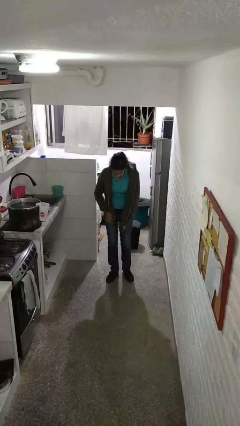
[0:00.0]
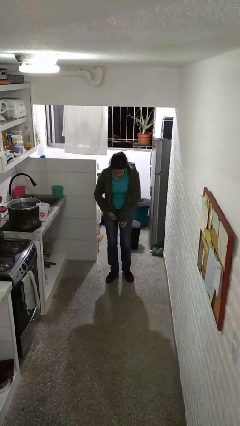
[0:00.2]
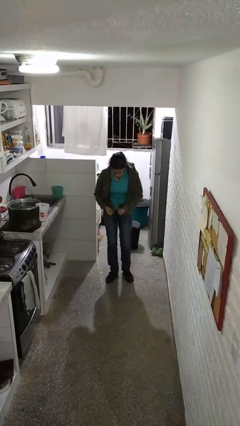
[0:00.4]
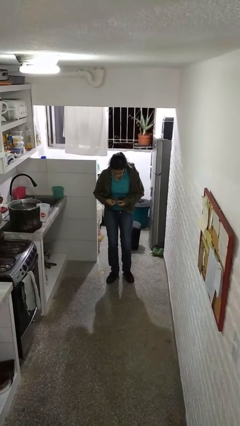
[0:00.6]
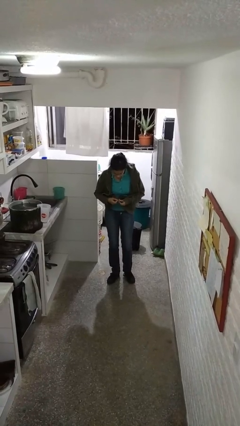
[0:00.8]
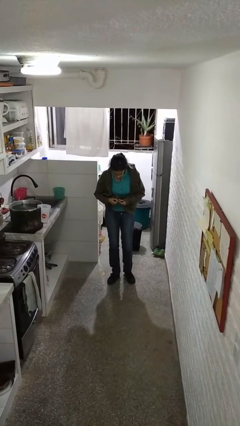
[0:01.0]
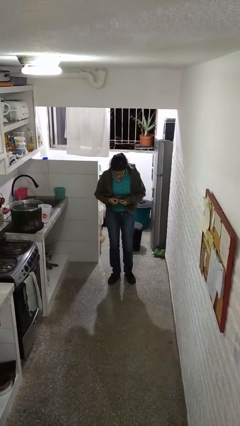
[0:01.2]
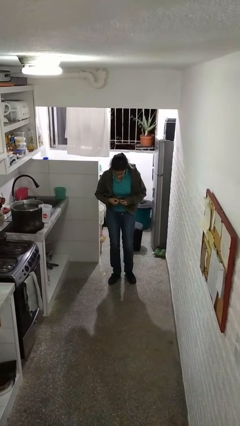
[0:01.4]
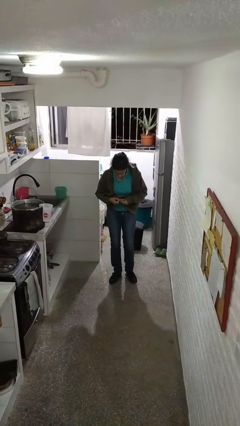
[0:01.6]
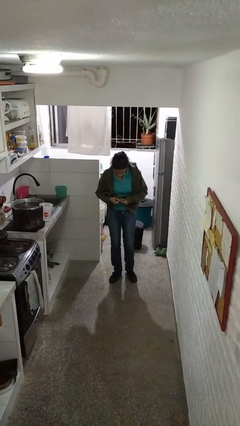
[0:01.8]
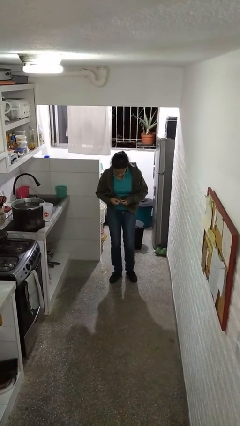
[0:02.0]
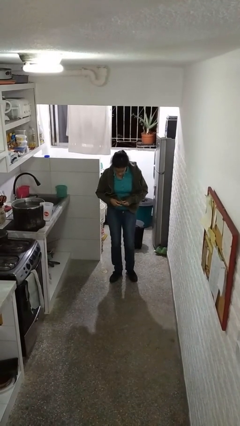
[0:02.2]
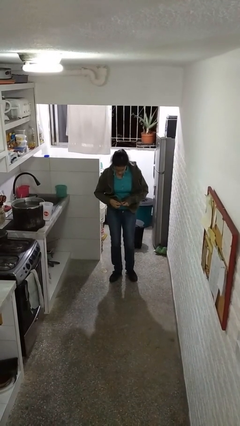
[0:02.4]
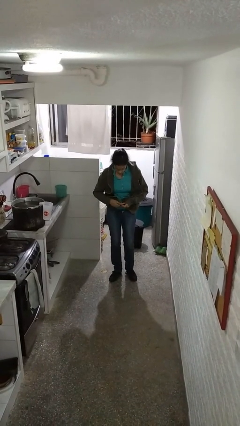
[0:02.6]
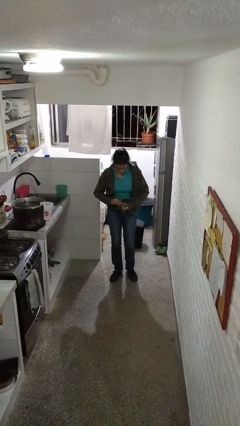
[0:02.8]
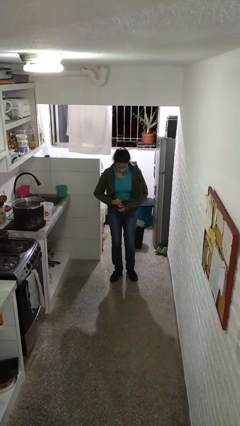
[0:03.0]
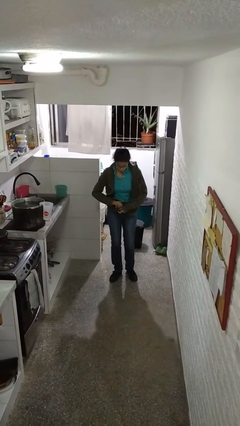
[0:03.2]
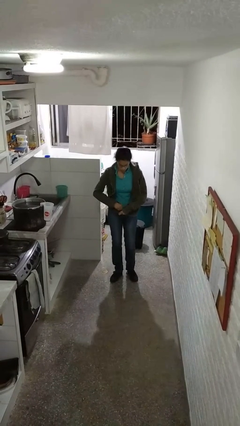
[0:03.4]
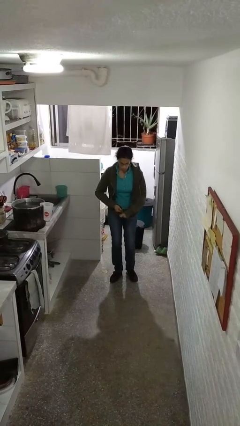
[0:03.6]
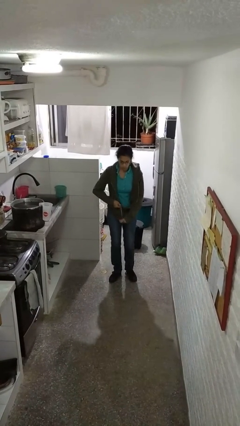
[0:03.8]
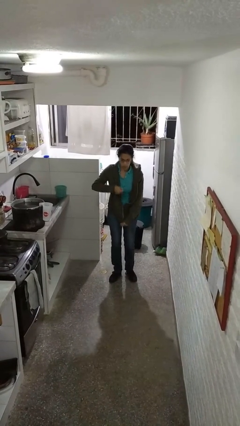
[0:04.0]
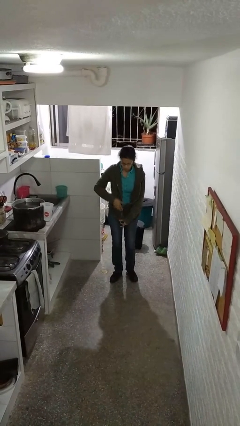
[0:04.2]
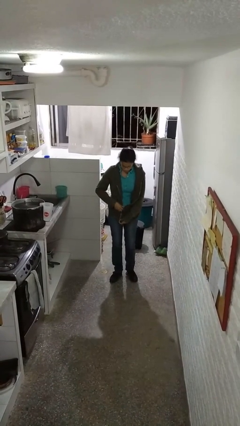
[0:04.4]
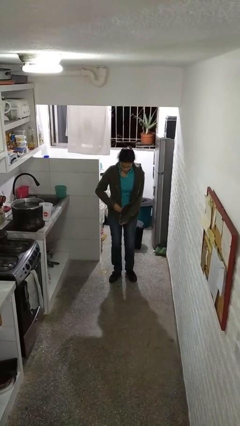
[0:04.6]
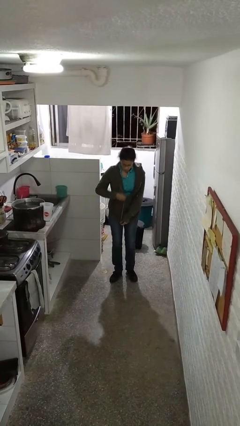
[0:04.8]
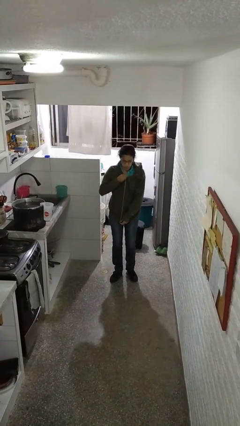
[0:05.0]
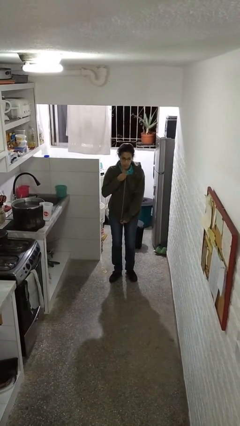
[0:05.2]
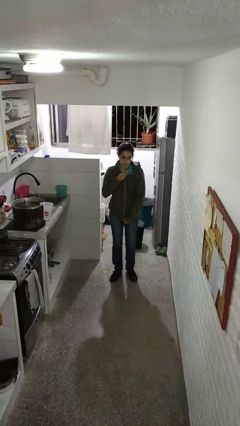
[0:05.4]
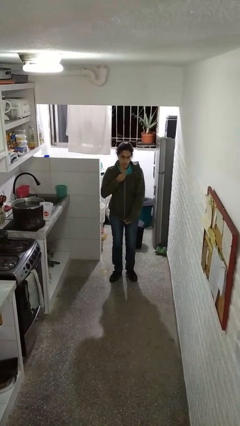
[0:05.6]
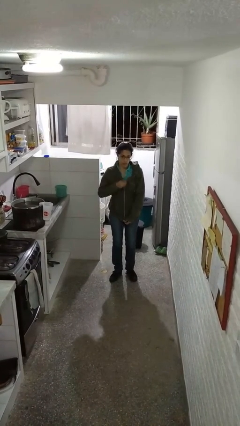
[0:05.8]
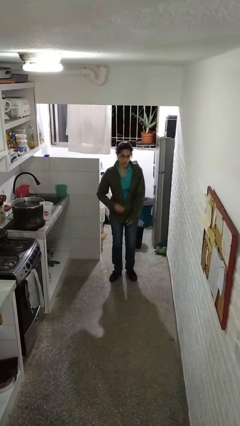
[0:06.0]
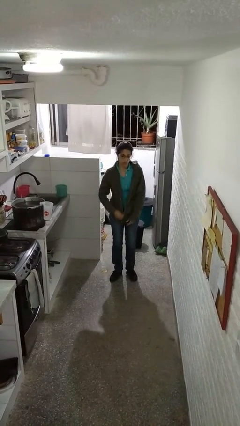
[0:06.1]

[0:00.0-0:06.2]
person zips up jacket

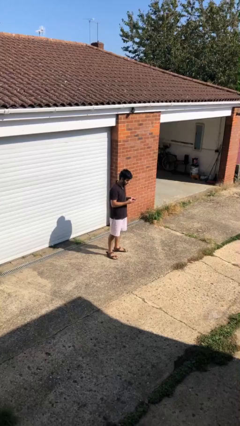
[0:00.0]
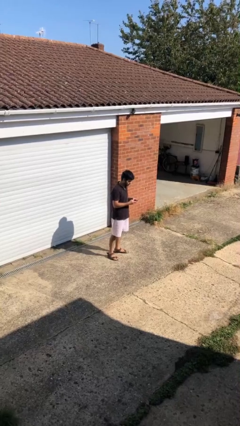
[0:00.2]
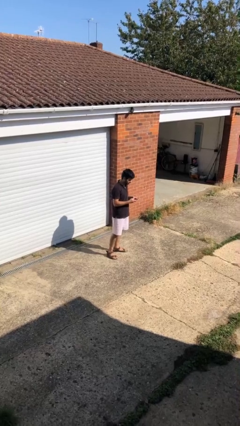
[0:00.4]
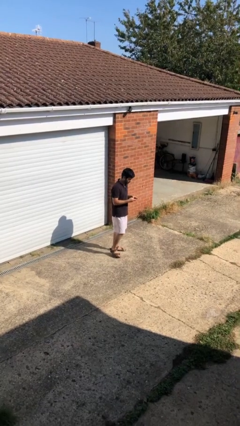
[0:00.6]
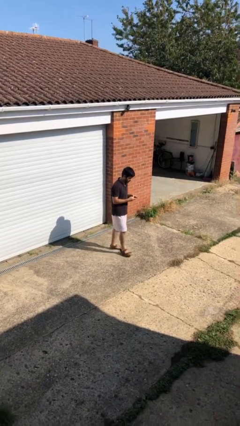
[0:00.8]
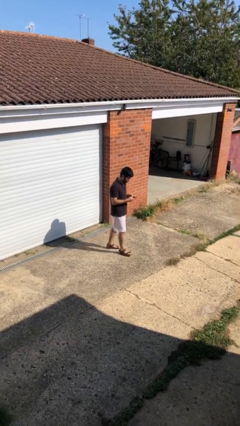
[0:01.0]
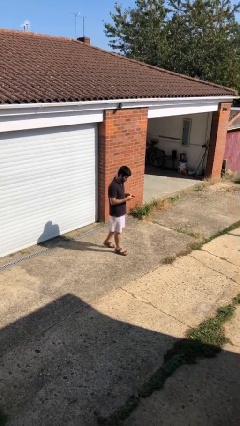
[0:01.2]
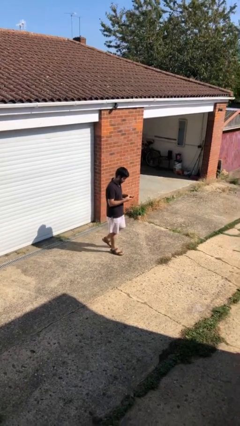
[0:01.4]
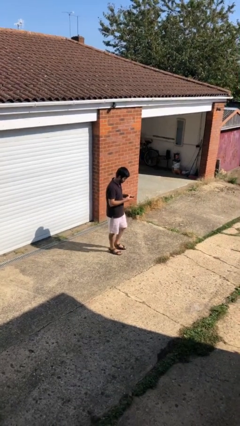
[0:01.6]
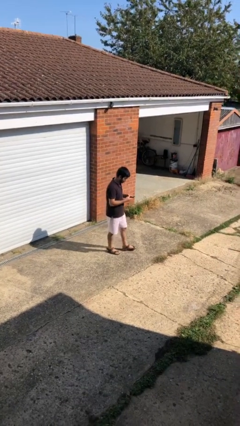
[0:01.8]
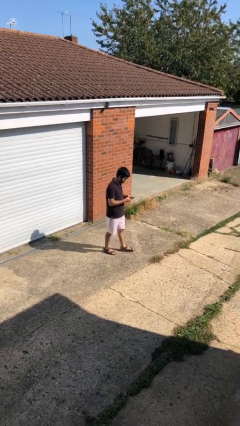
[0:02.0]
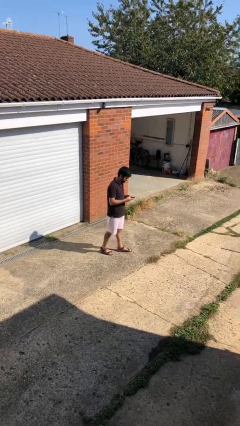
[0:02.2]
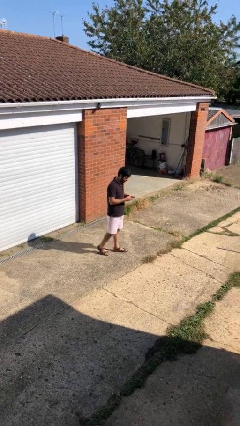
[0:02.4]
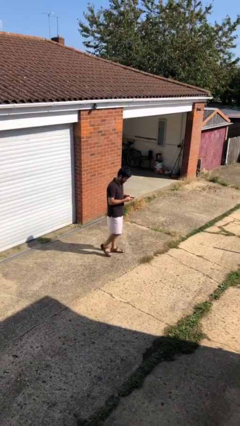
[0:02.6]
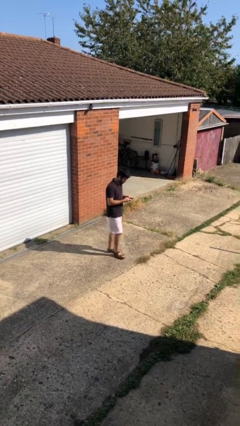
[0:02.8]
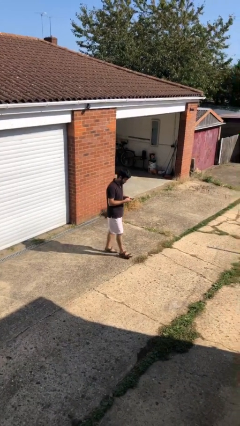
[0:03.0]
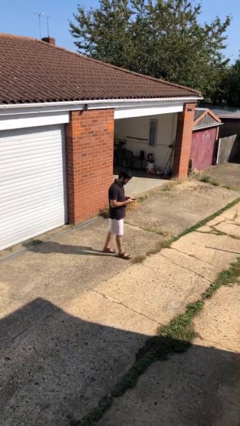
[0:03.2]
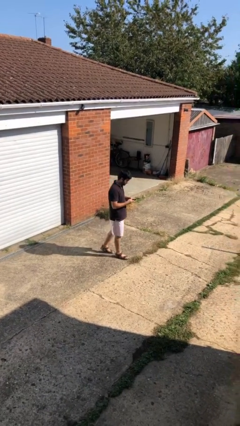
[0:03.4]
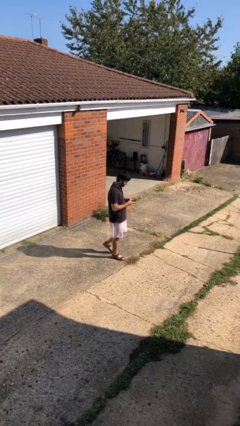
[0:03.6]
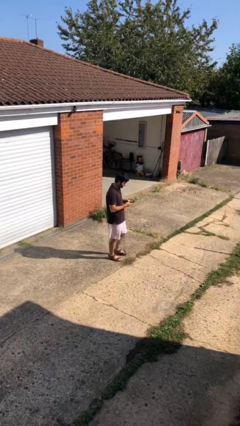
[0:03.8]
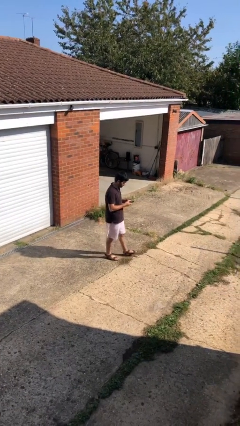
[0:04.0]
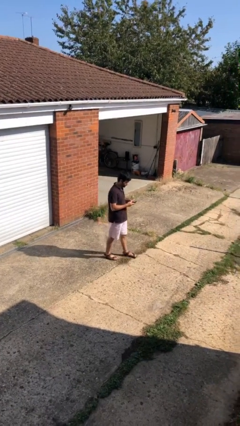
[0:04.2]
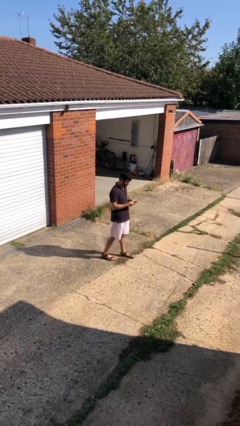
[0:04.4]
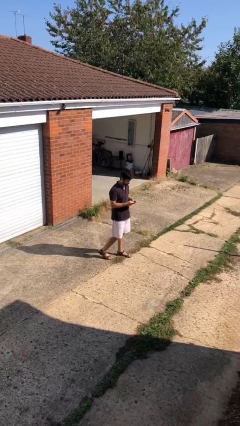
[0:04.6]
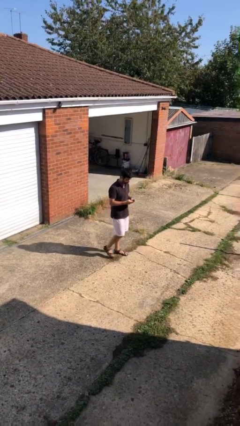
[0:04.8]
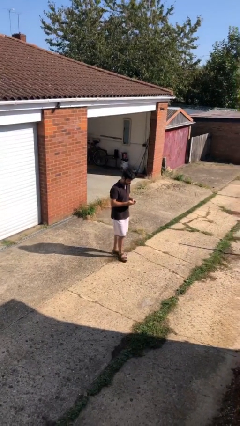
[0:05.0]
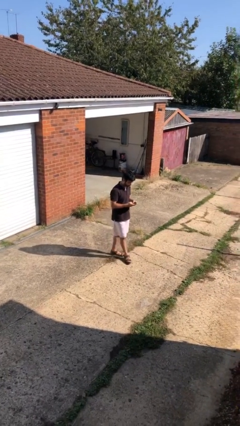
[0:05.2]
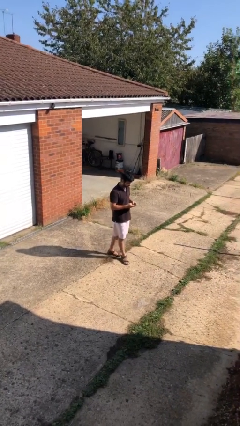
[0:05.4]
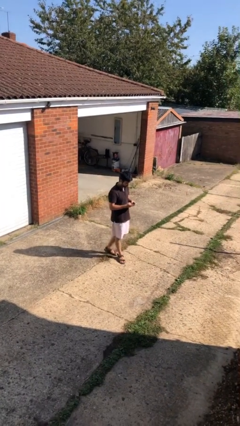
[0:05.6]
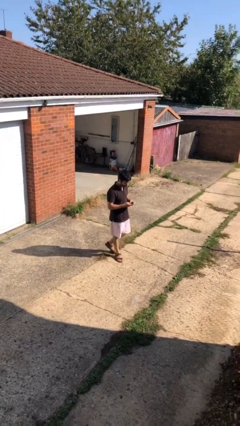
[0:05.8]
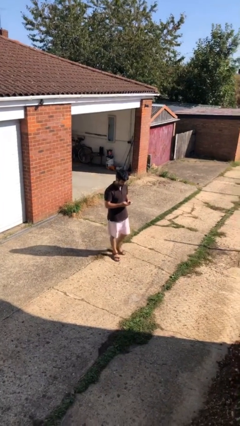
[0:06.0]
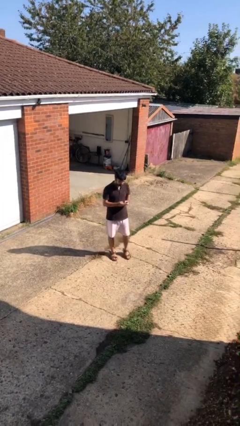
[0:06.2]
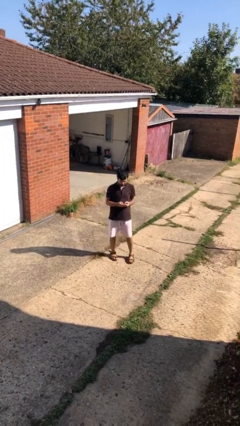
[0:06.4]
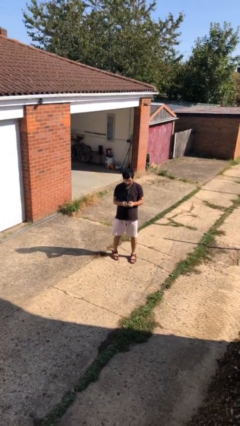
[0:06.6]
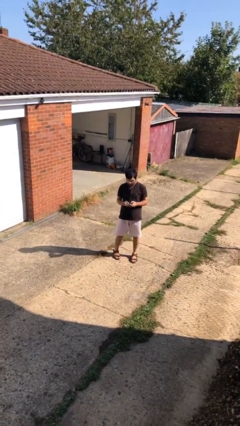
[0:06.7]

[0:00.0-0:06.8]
person texts on phone

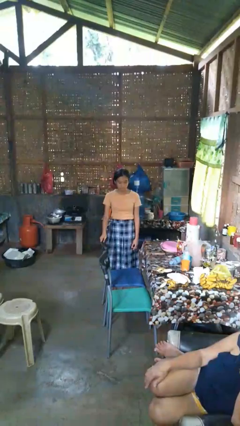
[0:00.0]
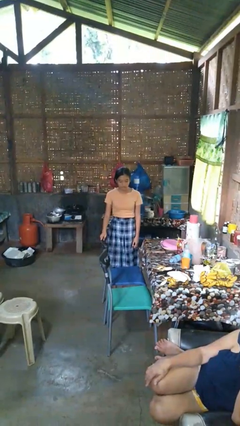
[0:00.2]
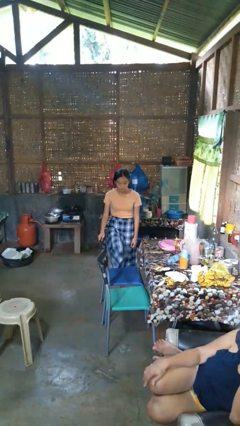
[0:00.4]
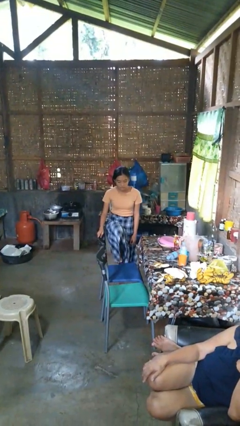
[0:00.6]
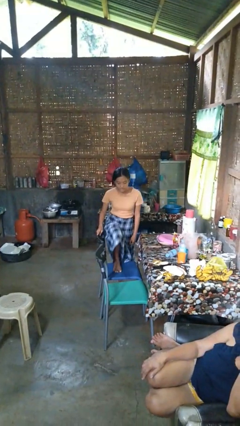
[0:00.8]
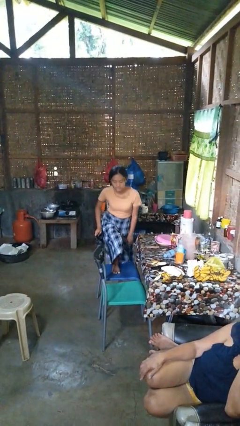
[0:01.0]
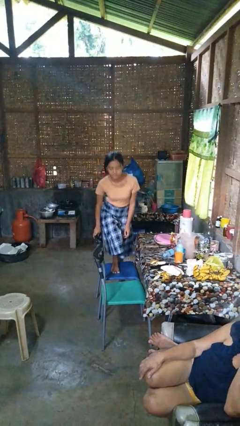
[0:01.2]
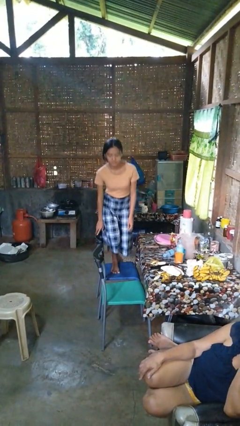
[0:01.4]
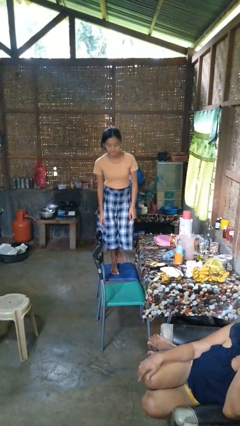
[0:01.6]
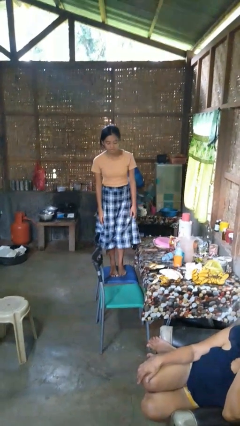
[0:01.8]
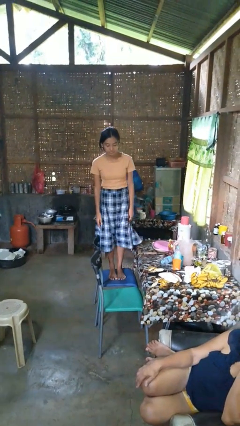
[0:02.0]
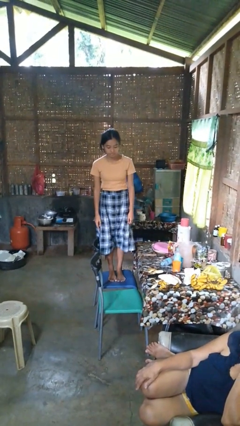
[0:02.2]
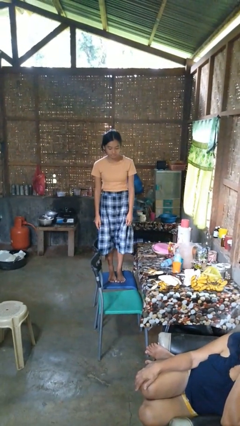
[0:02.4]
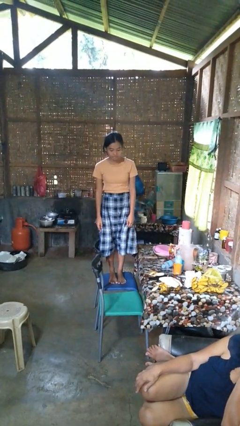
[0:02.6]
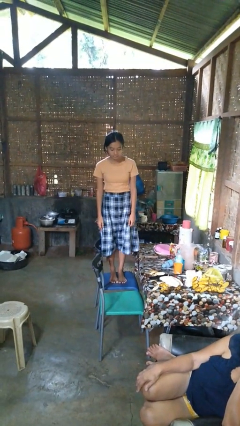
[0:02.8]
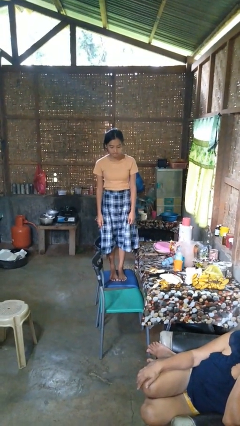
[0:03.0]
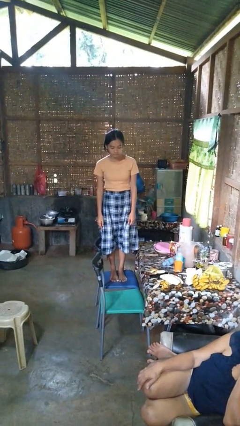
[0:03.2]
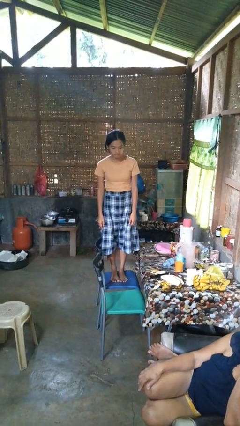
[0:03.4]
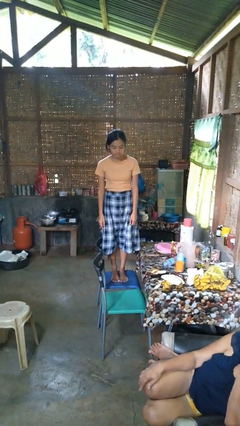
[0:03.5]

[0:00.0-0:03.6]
person climbs on couch

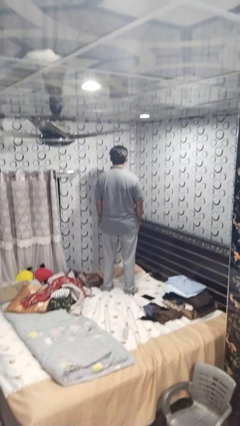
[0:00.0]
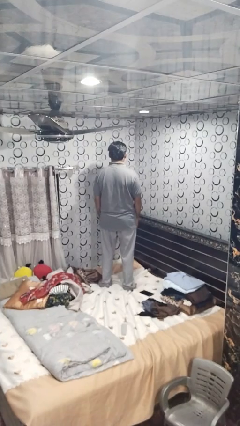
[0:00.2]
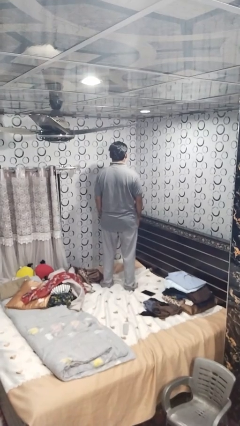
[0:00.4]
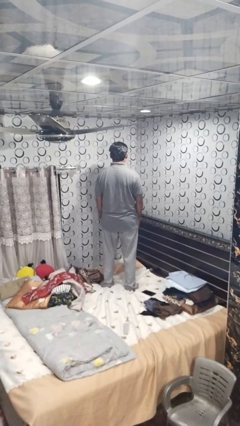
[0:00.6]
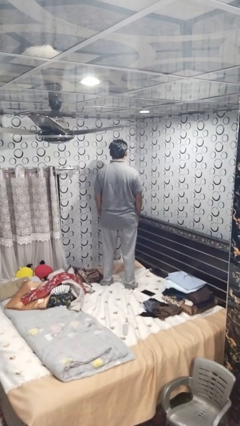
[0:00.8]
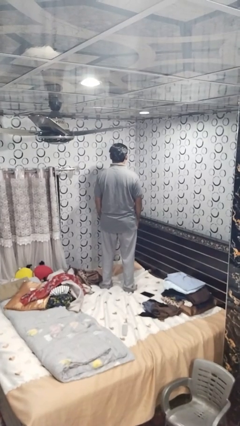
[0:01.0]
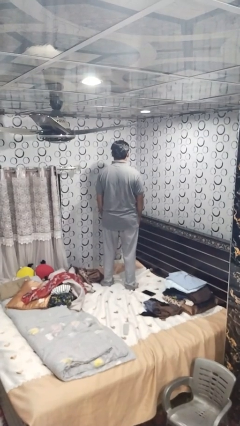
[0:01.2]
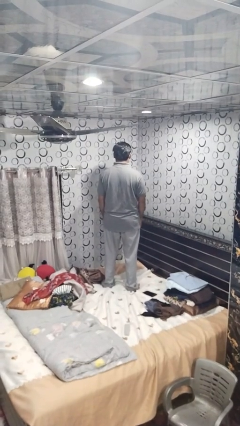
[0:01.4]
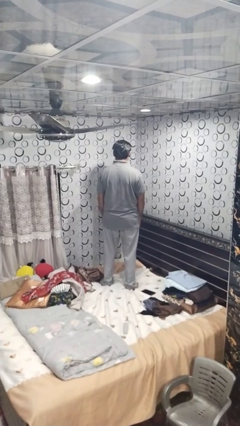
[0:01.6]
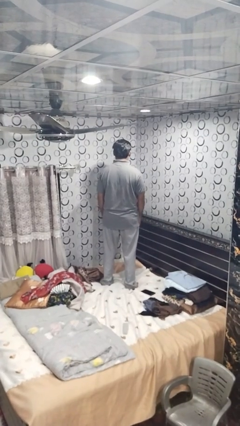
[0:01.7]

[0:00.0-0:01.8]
person jumps on bed
